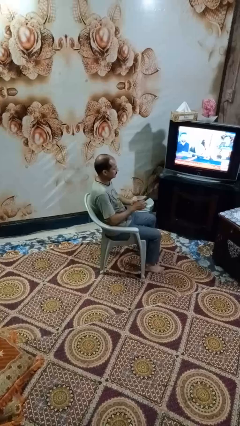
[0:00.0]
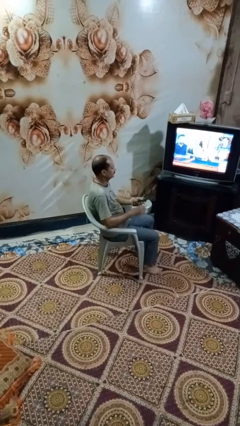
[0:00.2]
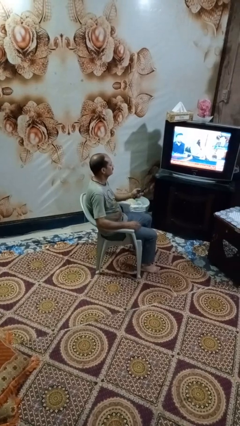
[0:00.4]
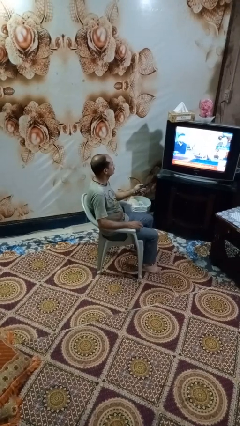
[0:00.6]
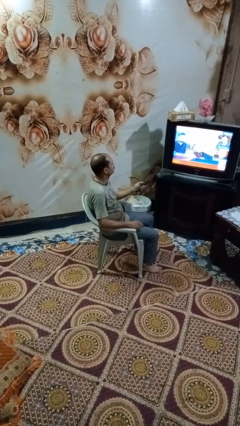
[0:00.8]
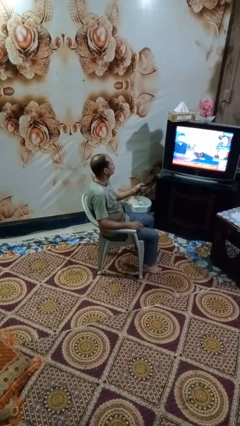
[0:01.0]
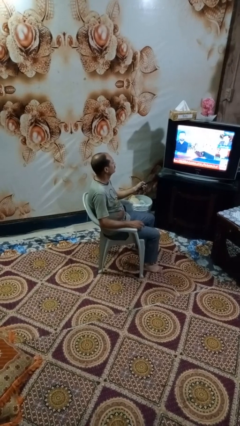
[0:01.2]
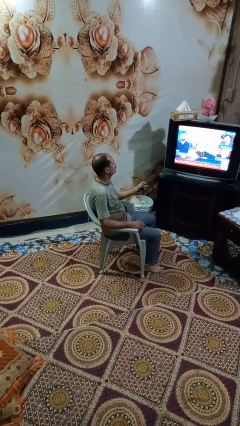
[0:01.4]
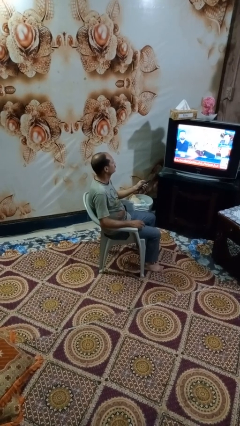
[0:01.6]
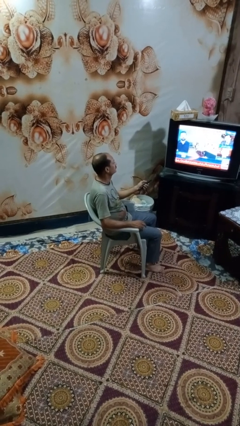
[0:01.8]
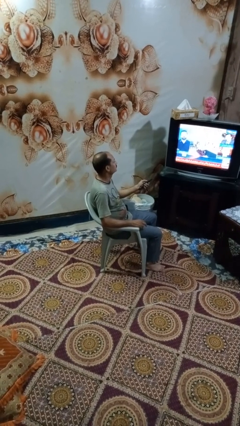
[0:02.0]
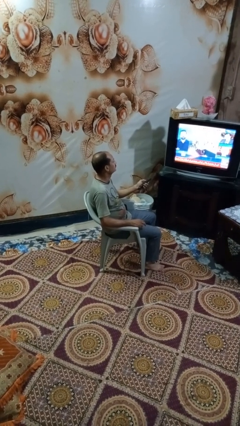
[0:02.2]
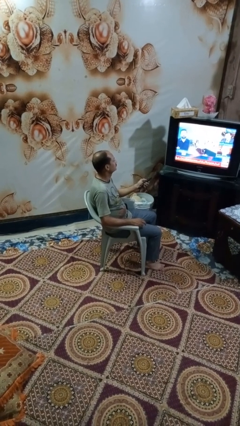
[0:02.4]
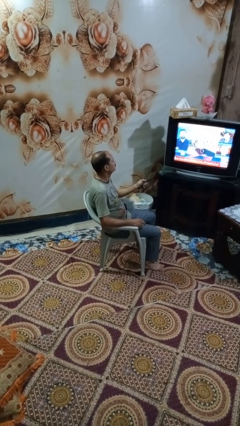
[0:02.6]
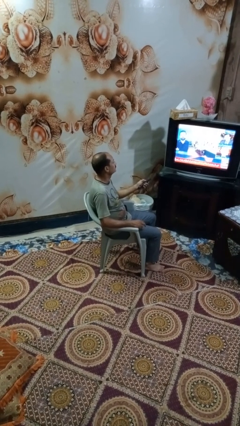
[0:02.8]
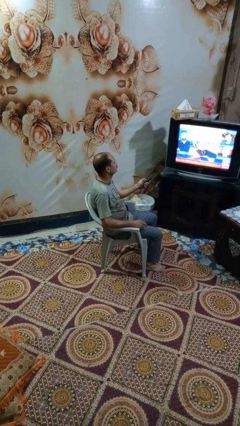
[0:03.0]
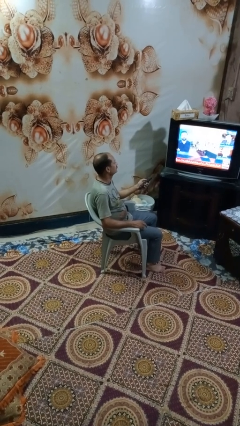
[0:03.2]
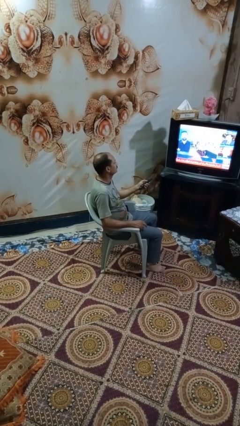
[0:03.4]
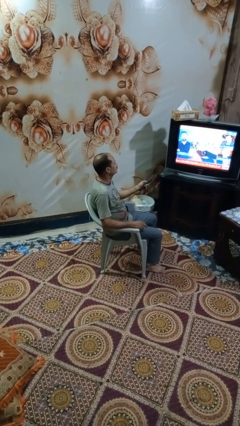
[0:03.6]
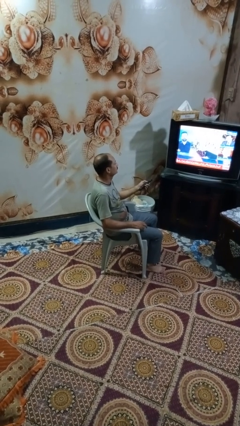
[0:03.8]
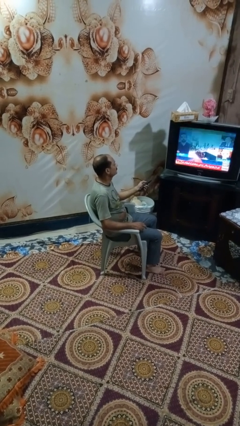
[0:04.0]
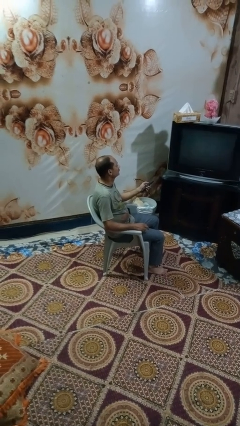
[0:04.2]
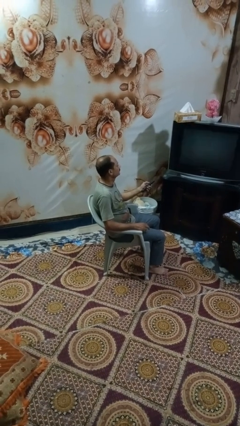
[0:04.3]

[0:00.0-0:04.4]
person uses television remote

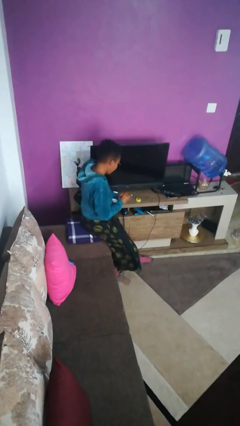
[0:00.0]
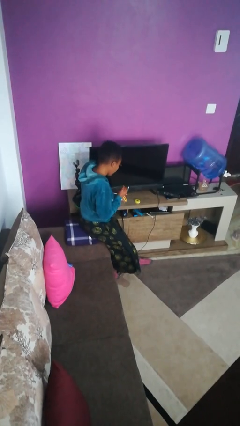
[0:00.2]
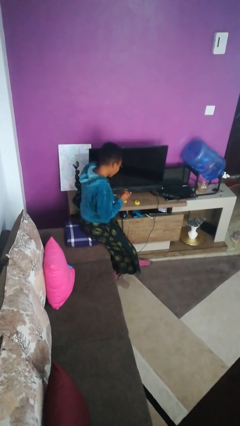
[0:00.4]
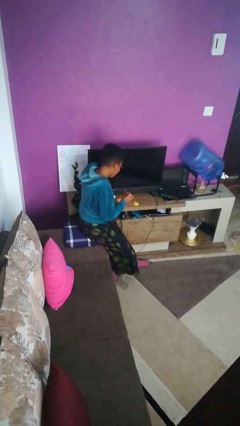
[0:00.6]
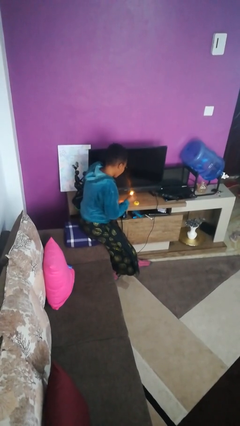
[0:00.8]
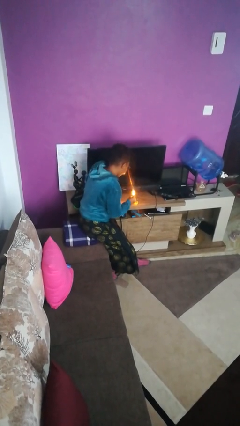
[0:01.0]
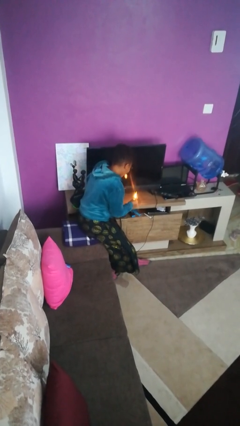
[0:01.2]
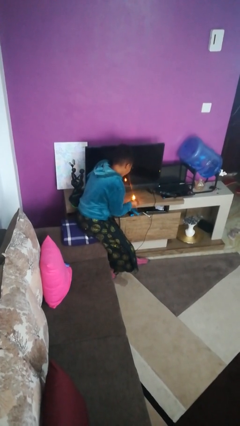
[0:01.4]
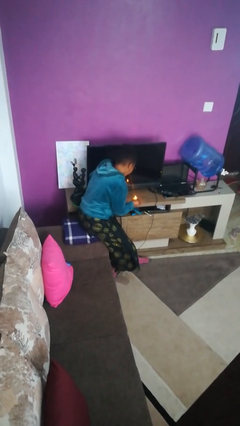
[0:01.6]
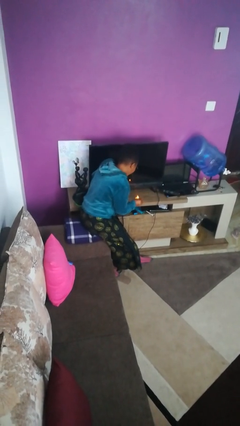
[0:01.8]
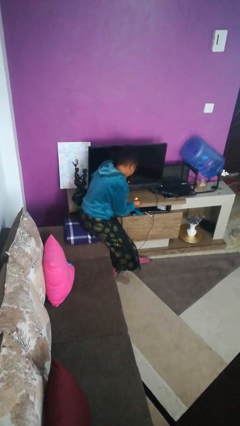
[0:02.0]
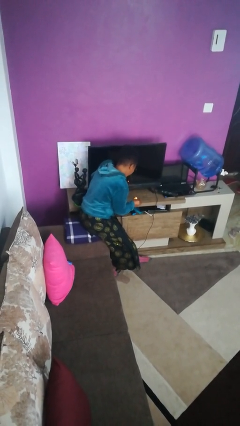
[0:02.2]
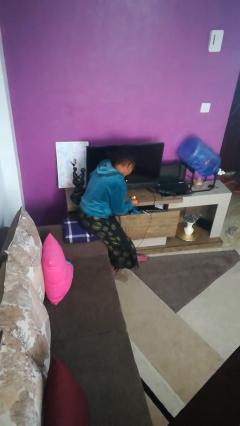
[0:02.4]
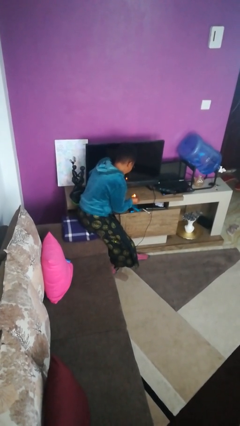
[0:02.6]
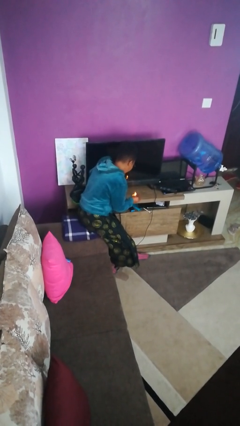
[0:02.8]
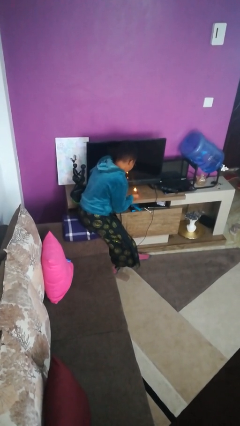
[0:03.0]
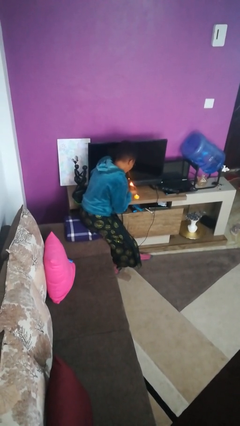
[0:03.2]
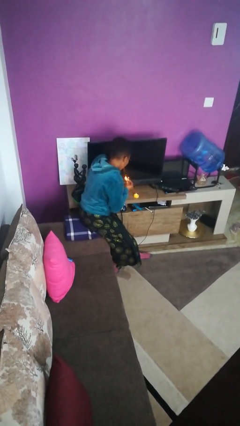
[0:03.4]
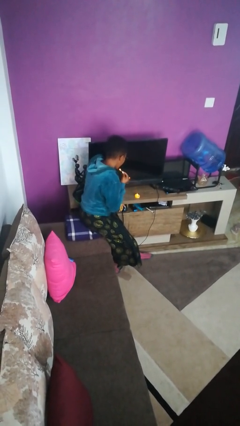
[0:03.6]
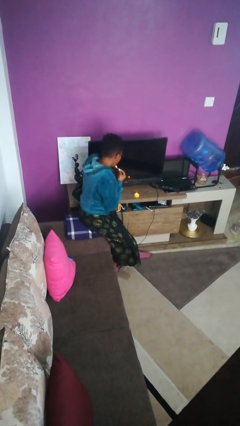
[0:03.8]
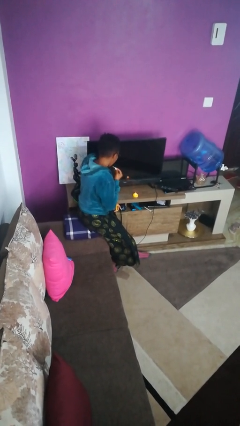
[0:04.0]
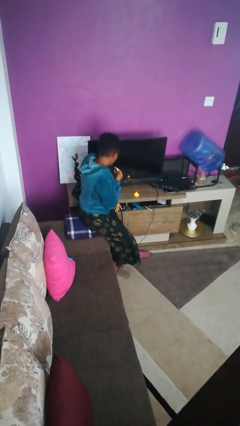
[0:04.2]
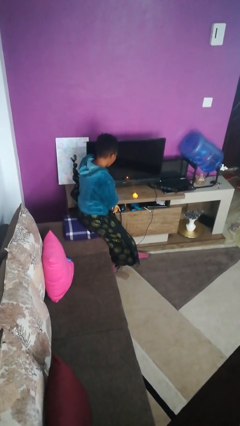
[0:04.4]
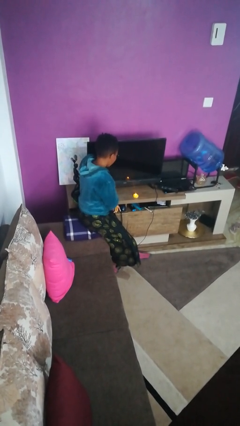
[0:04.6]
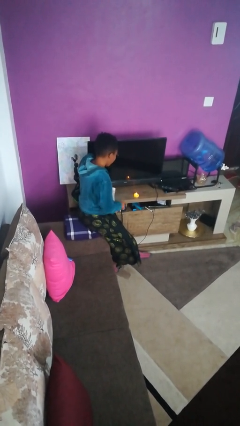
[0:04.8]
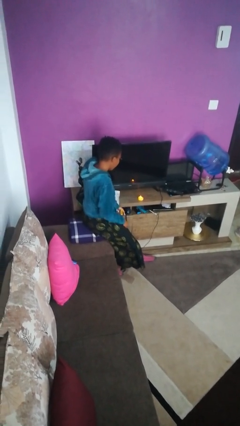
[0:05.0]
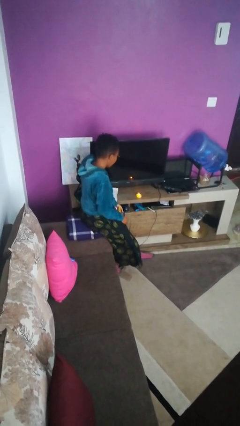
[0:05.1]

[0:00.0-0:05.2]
person lights candle

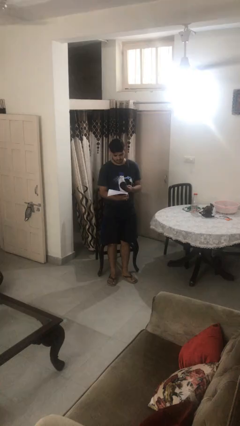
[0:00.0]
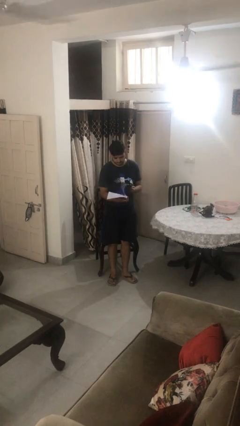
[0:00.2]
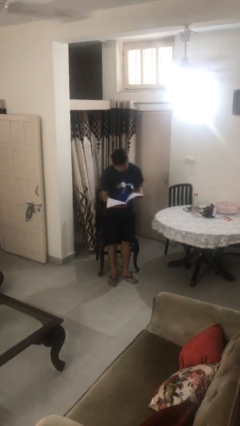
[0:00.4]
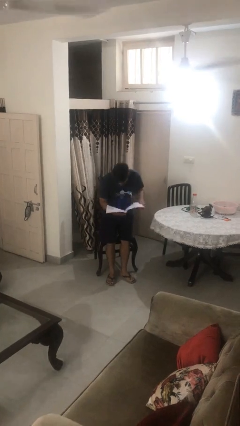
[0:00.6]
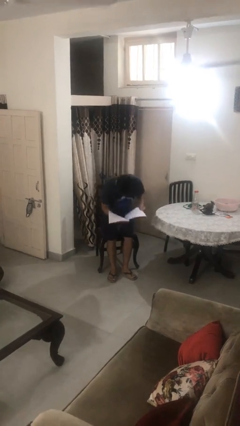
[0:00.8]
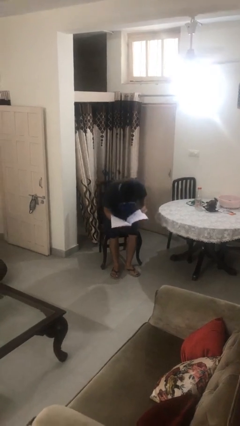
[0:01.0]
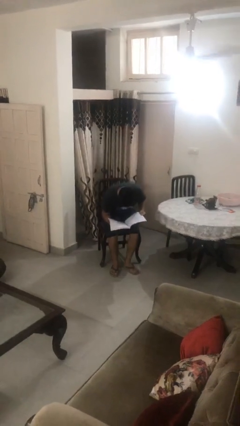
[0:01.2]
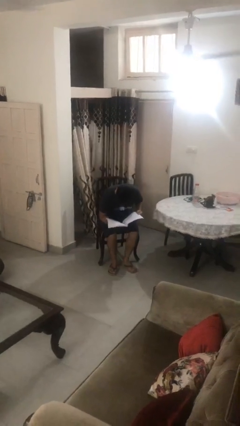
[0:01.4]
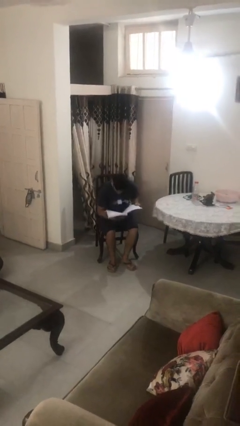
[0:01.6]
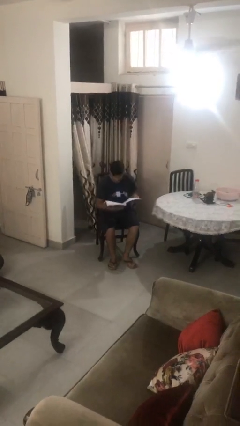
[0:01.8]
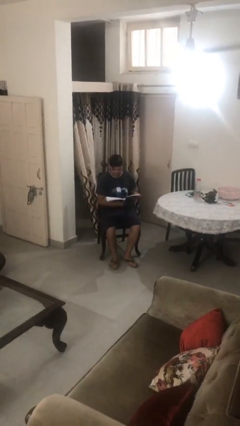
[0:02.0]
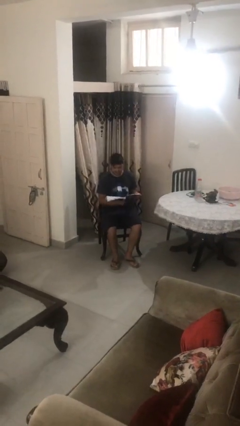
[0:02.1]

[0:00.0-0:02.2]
person sits down

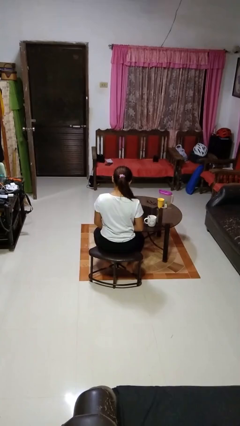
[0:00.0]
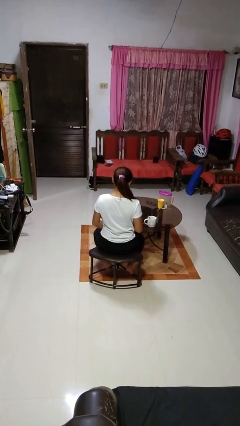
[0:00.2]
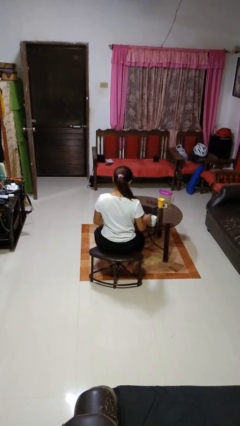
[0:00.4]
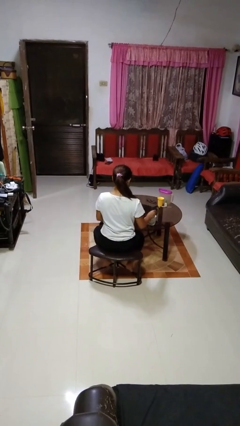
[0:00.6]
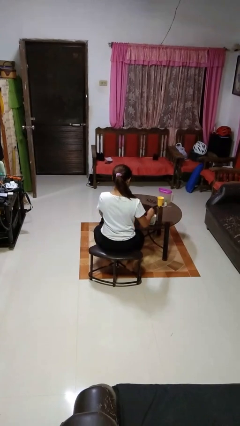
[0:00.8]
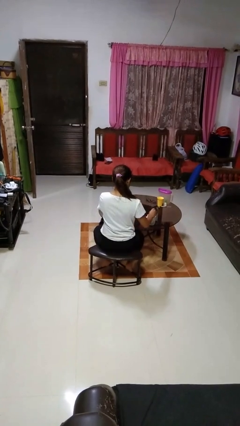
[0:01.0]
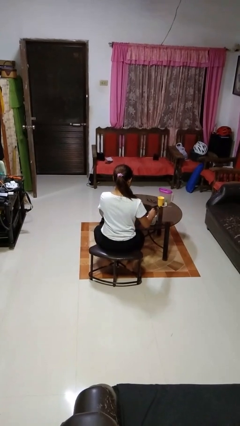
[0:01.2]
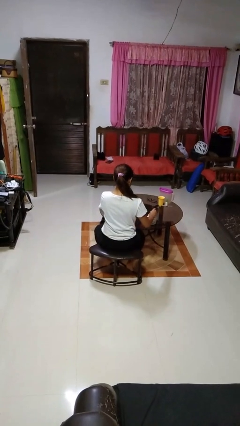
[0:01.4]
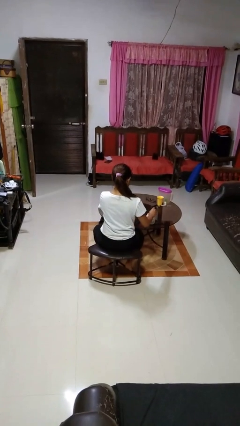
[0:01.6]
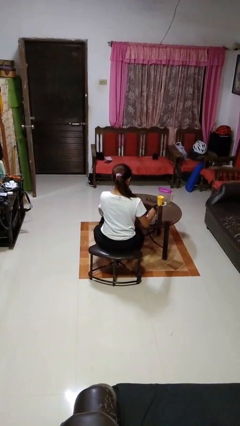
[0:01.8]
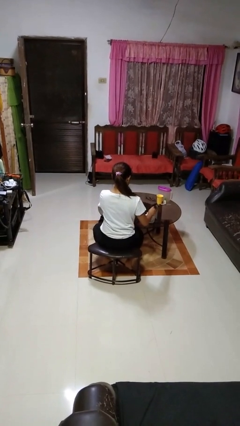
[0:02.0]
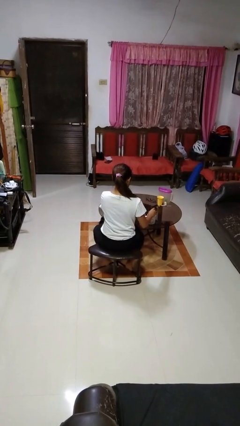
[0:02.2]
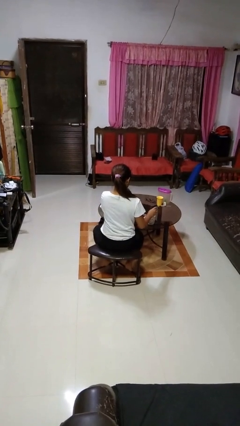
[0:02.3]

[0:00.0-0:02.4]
person stirs mug

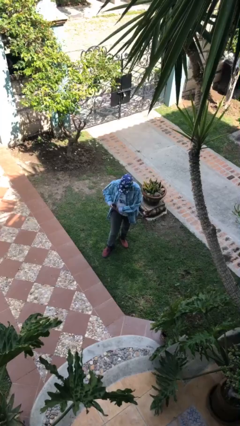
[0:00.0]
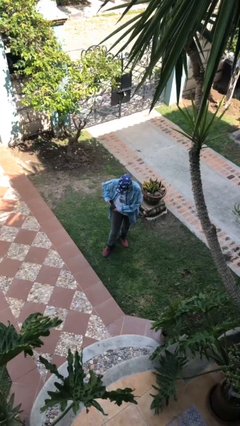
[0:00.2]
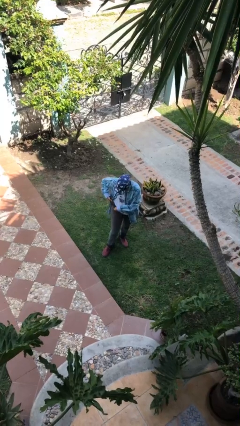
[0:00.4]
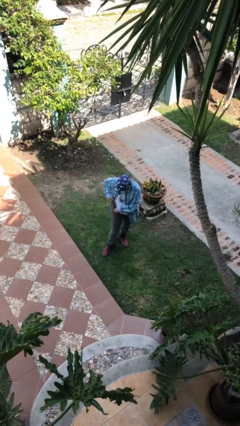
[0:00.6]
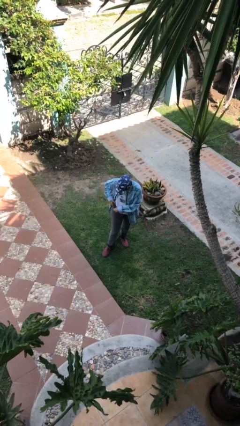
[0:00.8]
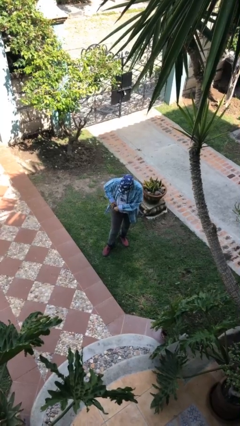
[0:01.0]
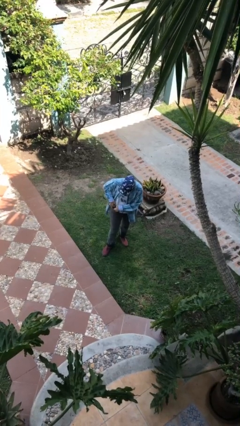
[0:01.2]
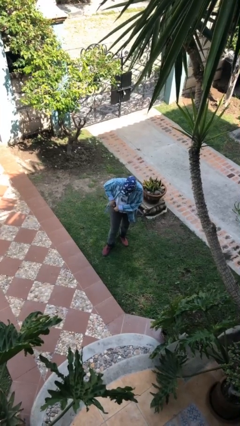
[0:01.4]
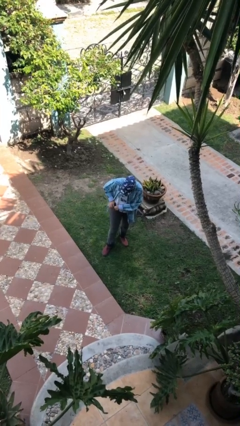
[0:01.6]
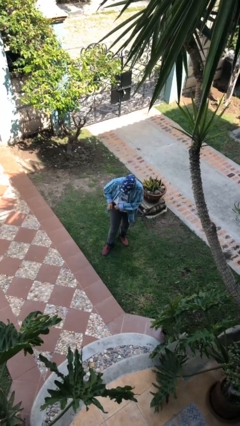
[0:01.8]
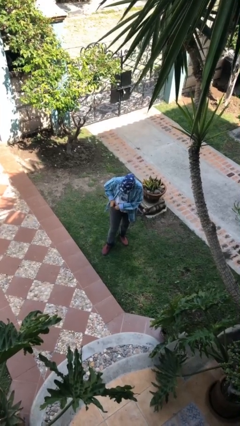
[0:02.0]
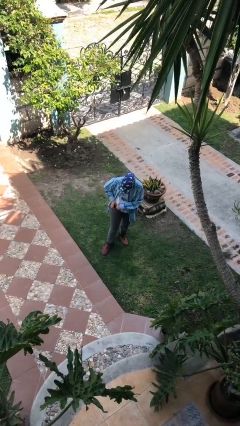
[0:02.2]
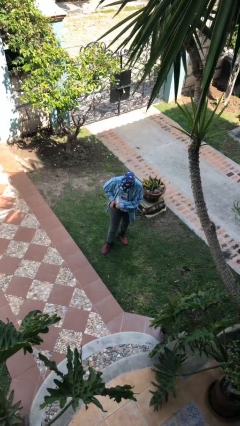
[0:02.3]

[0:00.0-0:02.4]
person puts phone into pocket

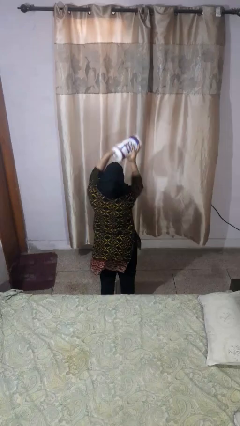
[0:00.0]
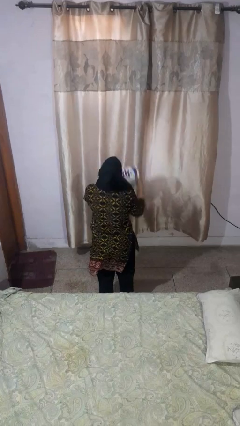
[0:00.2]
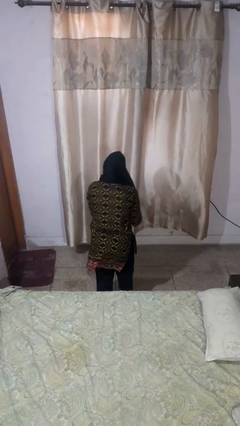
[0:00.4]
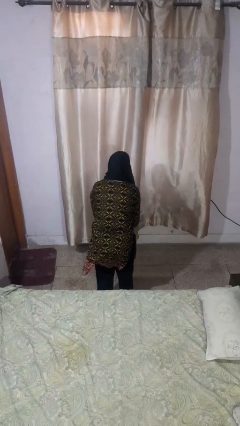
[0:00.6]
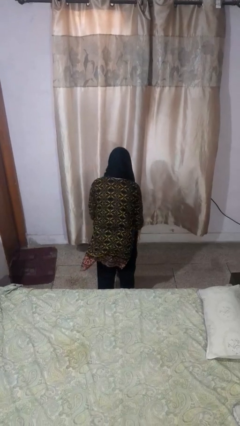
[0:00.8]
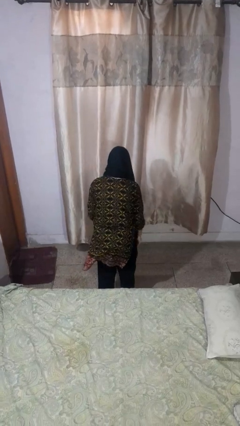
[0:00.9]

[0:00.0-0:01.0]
person catches dropped object

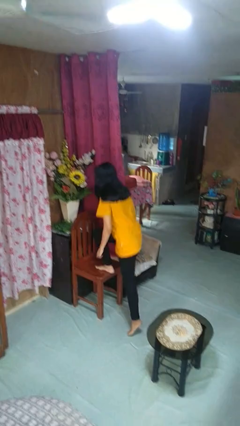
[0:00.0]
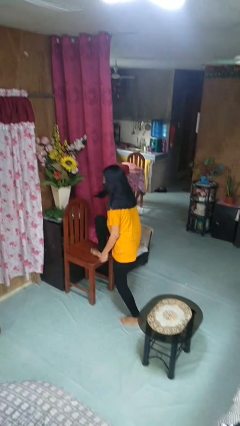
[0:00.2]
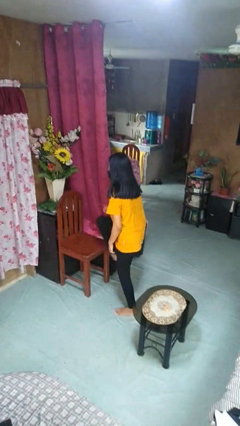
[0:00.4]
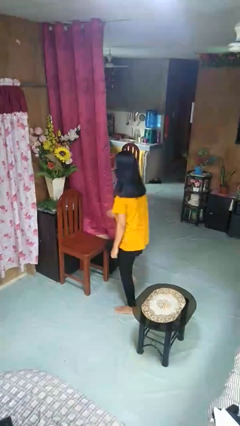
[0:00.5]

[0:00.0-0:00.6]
person climbs off chair
